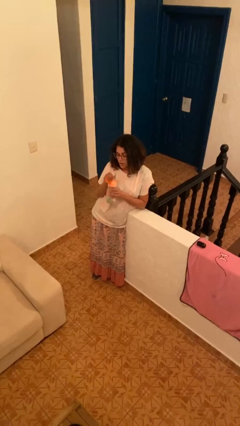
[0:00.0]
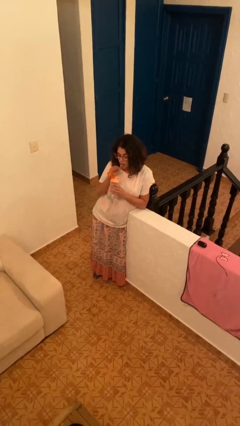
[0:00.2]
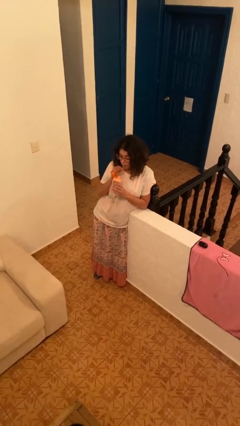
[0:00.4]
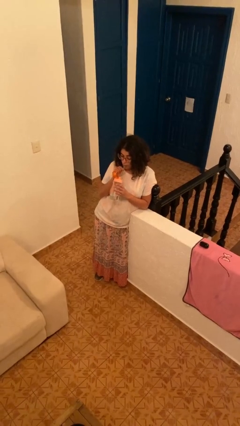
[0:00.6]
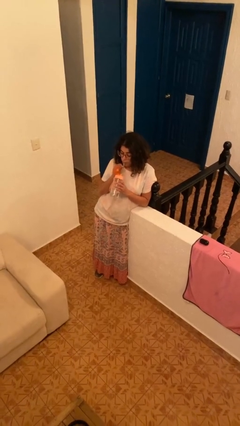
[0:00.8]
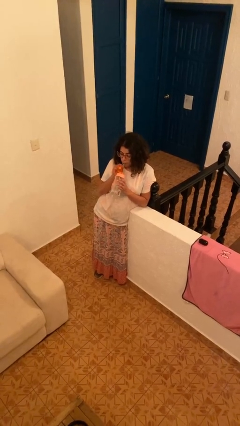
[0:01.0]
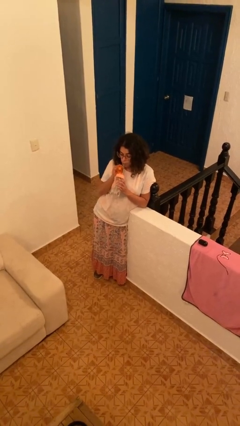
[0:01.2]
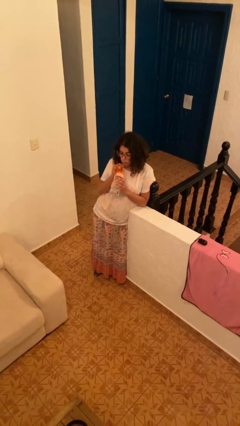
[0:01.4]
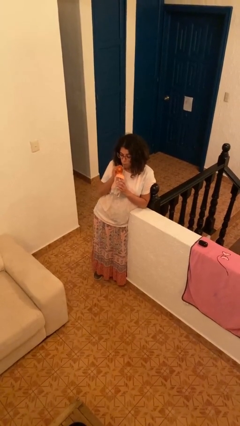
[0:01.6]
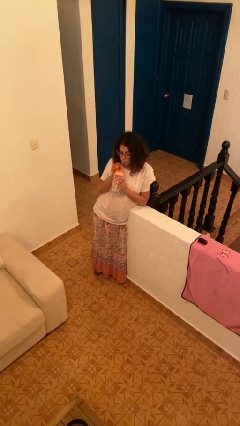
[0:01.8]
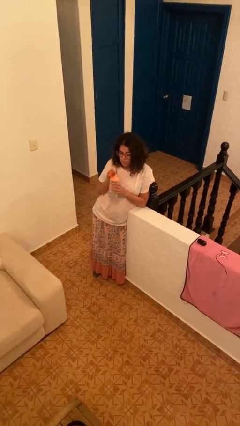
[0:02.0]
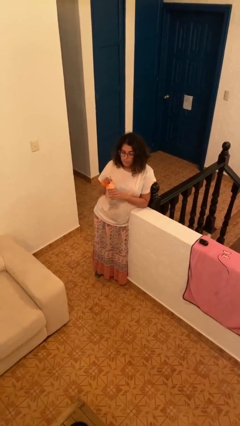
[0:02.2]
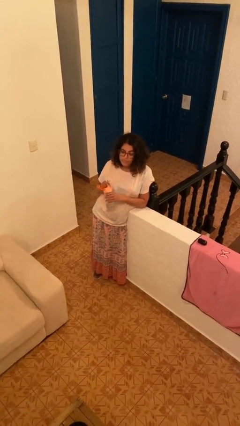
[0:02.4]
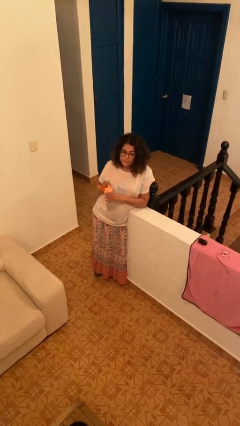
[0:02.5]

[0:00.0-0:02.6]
person drinks from straw

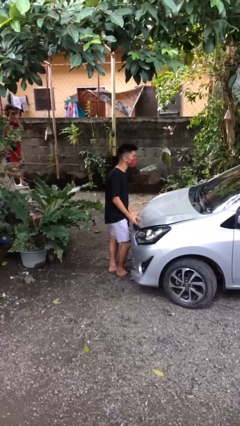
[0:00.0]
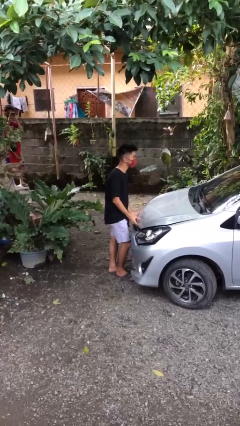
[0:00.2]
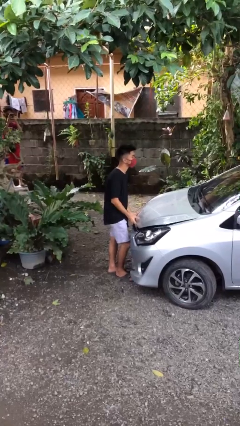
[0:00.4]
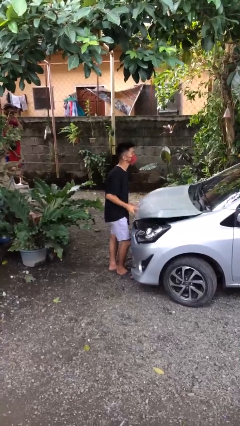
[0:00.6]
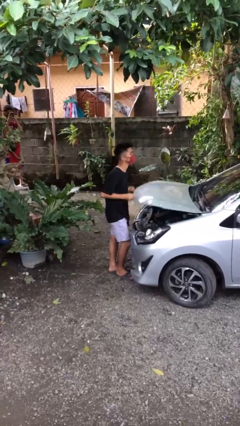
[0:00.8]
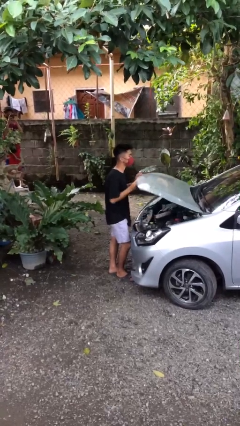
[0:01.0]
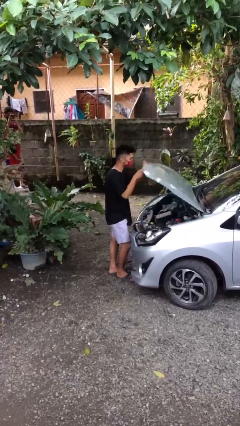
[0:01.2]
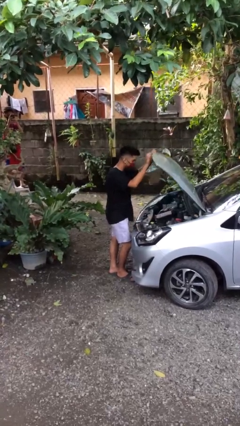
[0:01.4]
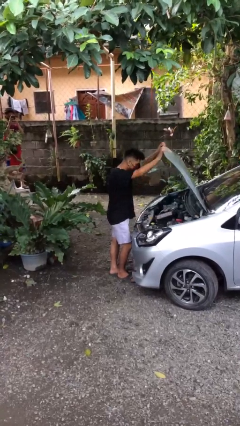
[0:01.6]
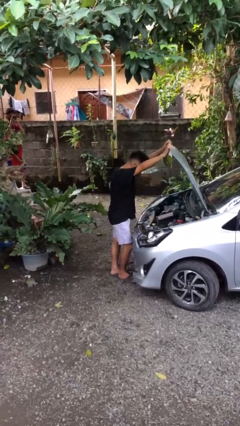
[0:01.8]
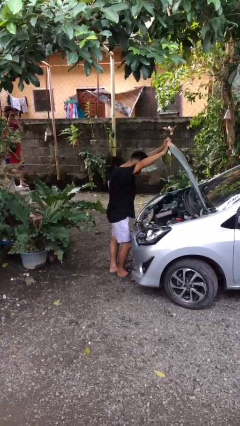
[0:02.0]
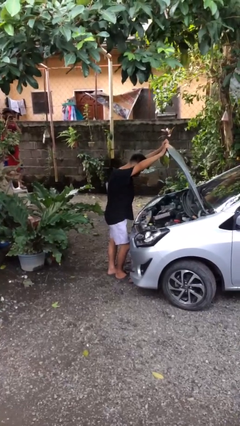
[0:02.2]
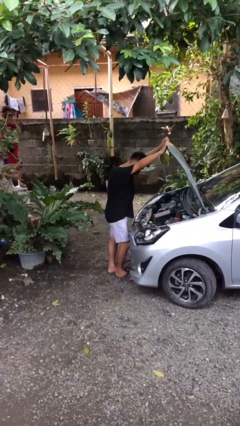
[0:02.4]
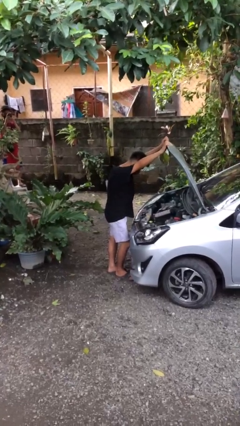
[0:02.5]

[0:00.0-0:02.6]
person opens car hood

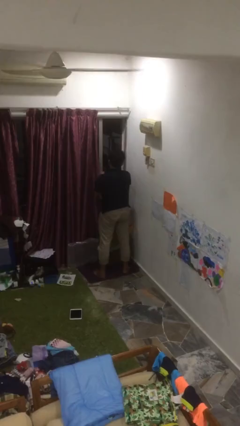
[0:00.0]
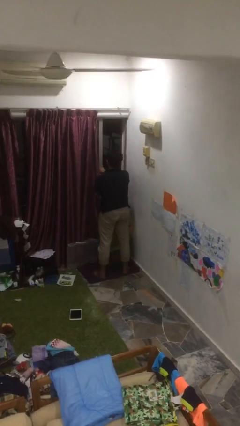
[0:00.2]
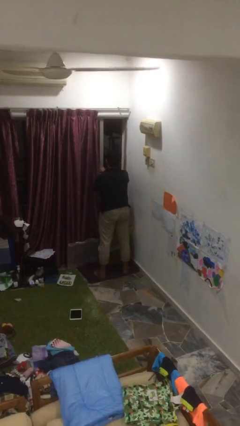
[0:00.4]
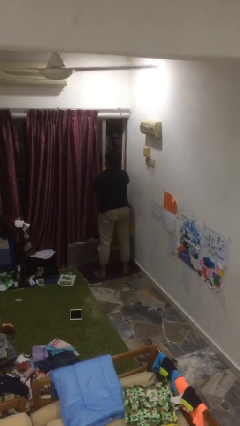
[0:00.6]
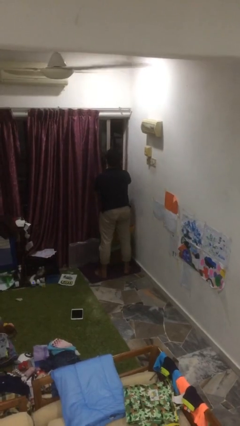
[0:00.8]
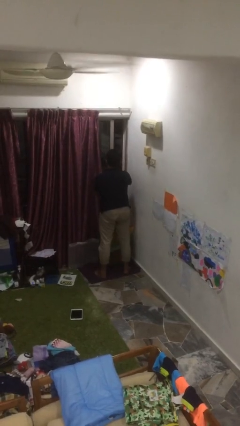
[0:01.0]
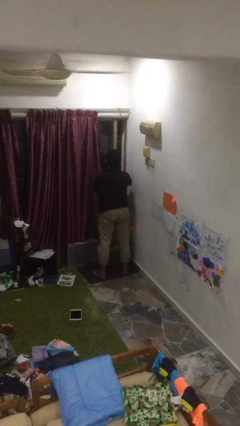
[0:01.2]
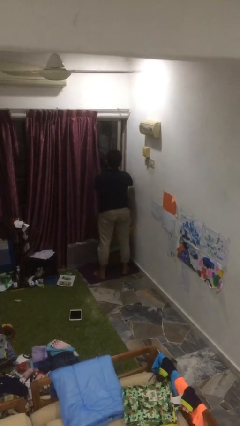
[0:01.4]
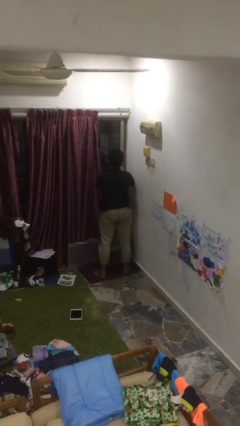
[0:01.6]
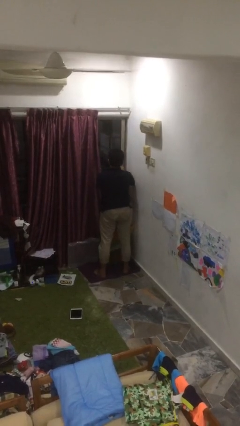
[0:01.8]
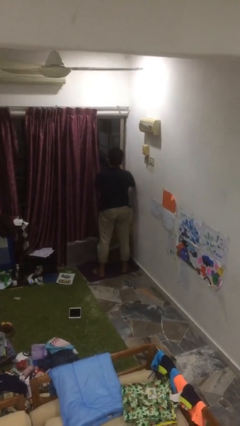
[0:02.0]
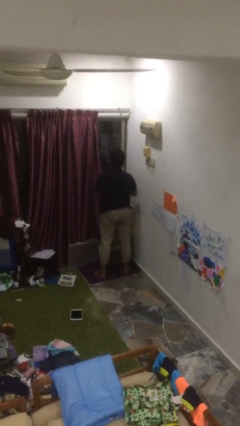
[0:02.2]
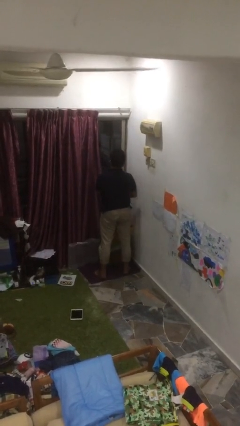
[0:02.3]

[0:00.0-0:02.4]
person closes home window

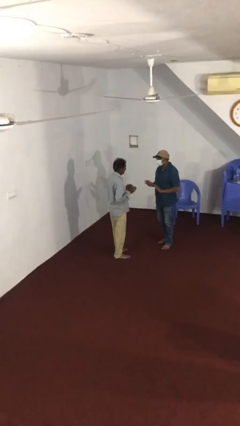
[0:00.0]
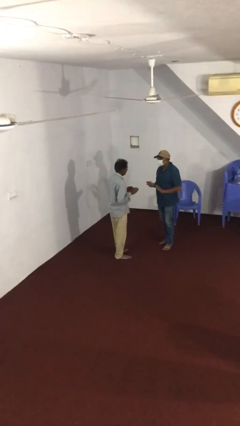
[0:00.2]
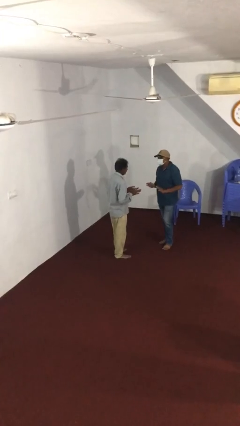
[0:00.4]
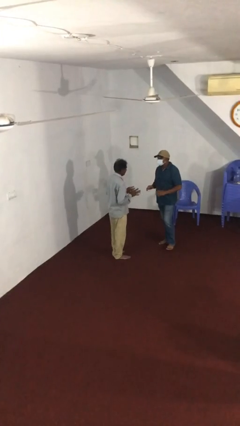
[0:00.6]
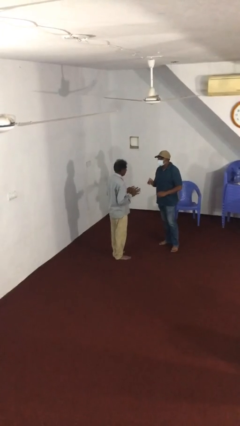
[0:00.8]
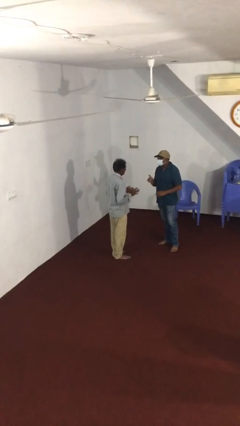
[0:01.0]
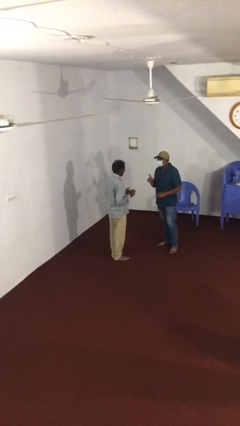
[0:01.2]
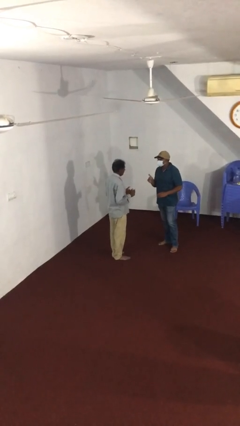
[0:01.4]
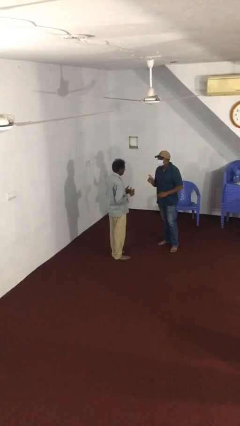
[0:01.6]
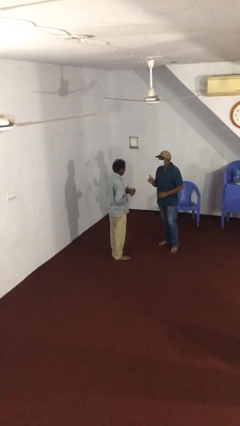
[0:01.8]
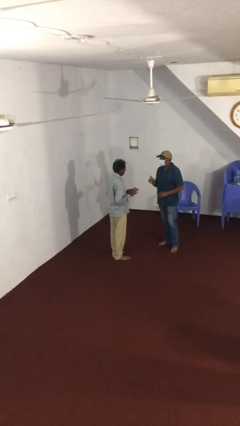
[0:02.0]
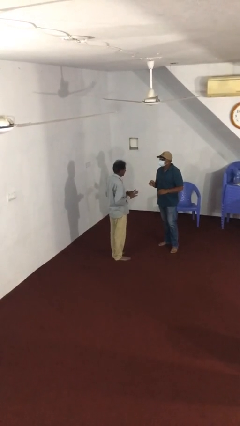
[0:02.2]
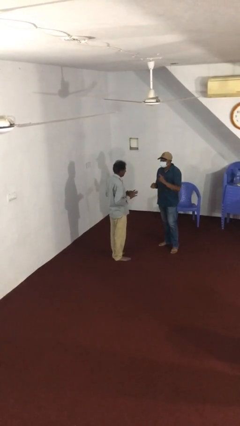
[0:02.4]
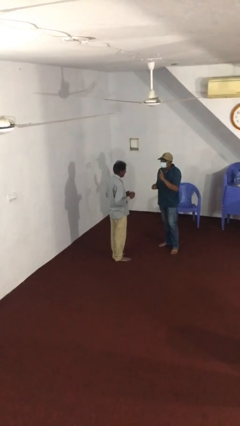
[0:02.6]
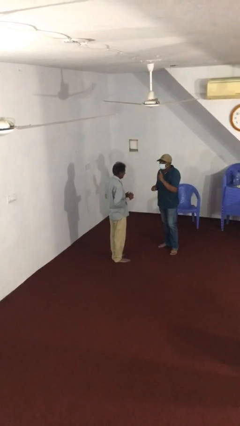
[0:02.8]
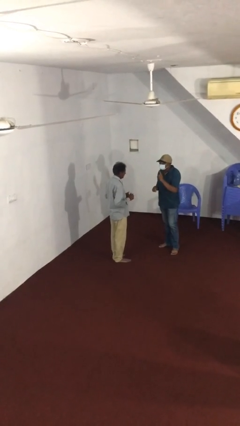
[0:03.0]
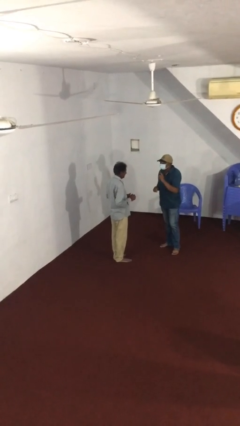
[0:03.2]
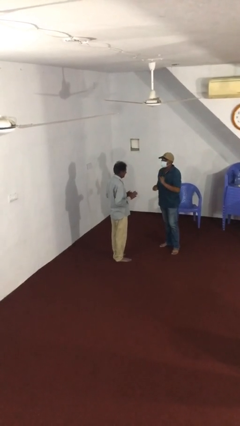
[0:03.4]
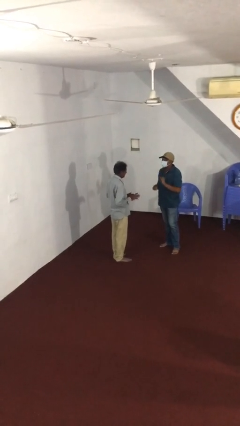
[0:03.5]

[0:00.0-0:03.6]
person talks to person

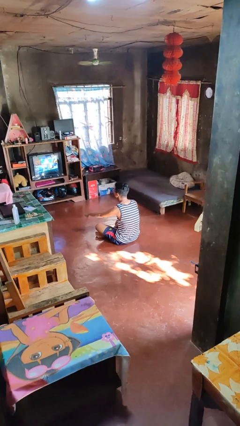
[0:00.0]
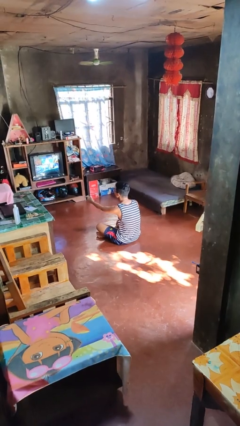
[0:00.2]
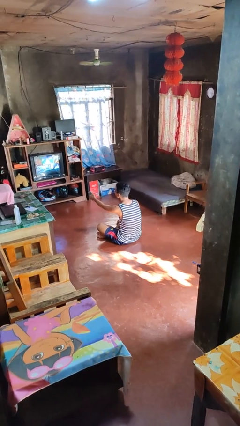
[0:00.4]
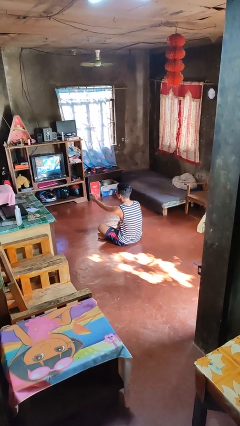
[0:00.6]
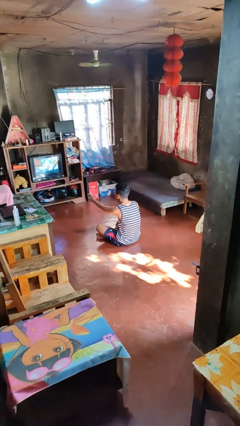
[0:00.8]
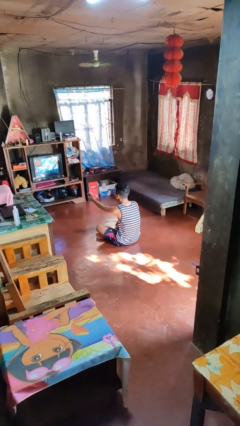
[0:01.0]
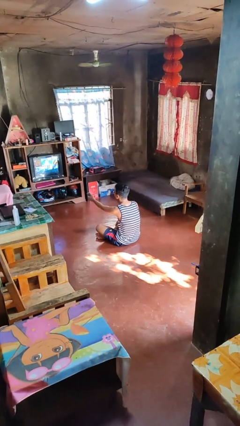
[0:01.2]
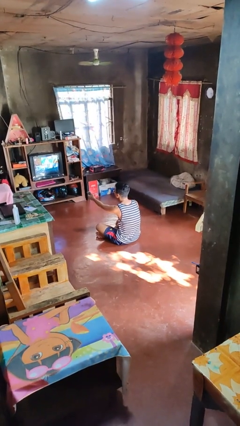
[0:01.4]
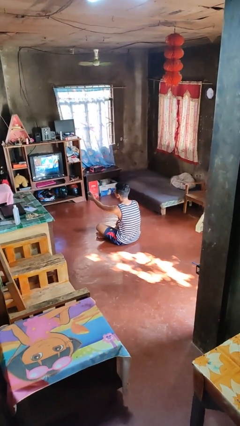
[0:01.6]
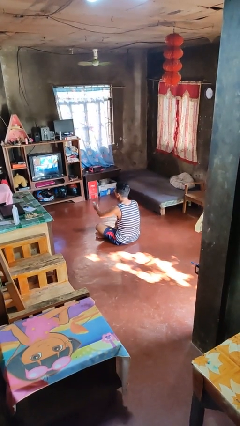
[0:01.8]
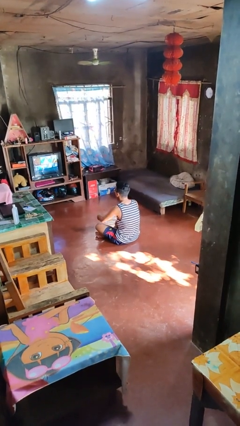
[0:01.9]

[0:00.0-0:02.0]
person uses television remote

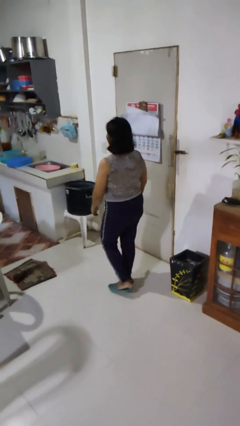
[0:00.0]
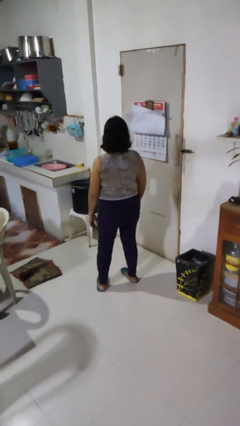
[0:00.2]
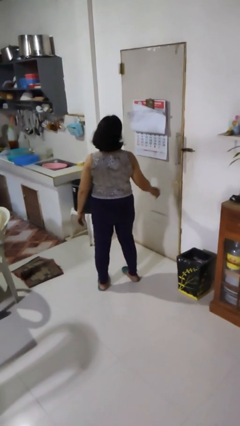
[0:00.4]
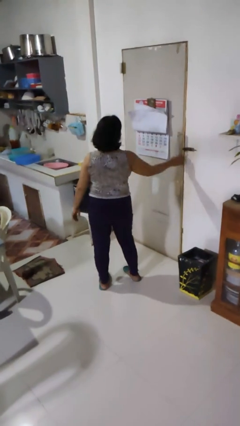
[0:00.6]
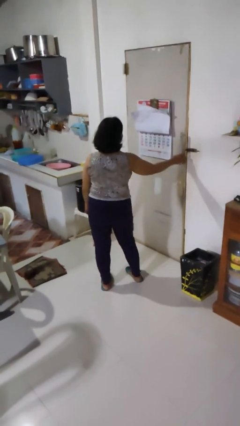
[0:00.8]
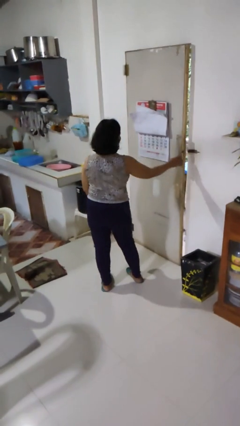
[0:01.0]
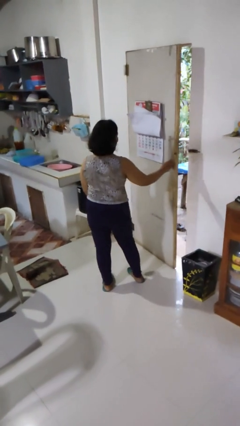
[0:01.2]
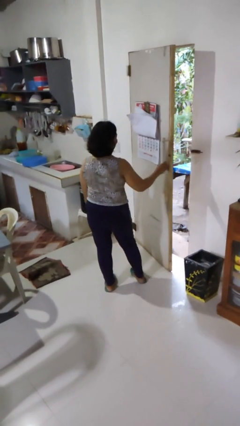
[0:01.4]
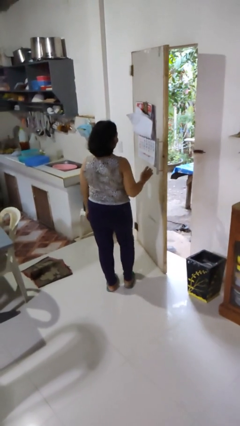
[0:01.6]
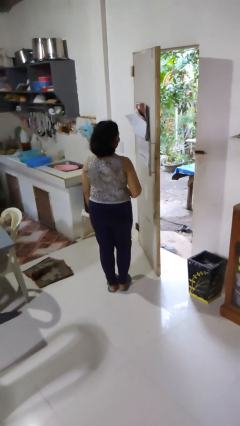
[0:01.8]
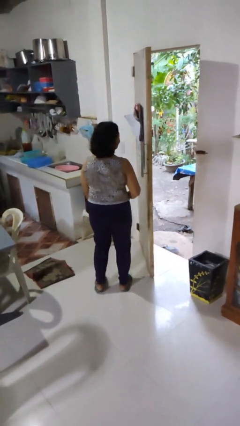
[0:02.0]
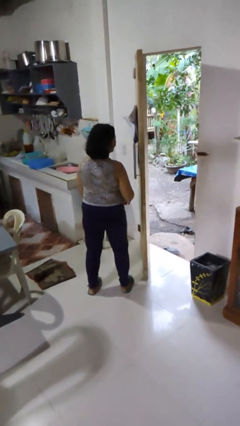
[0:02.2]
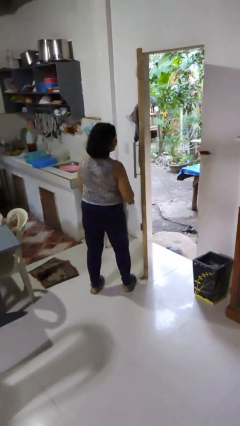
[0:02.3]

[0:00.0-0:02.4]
person opens facility door

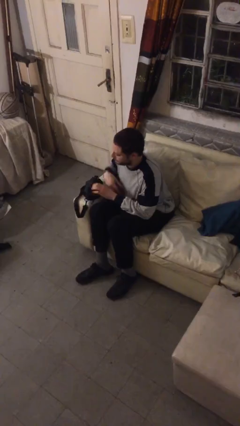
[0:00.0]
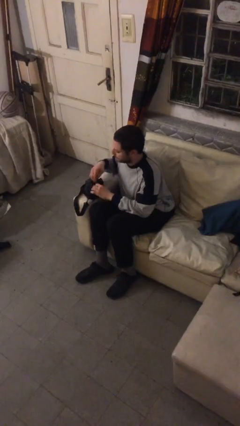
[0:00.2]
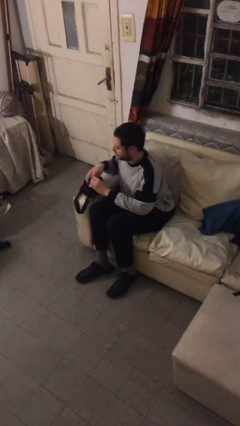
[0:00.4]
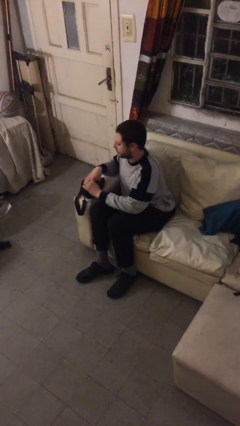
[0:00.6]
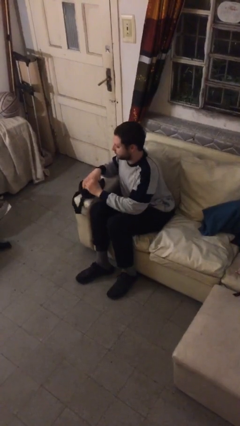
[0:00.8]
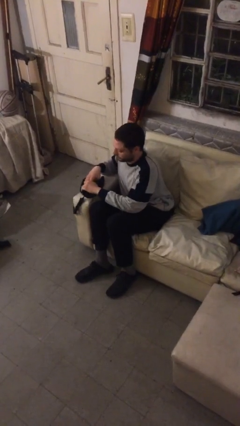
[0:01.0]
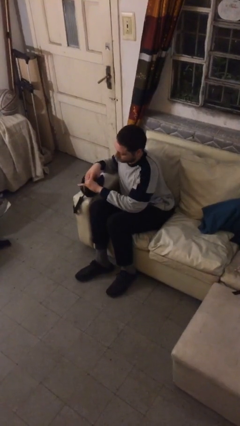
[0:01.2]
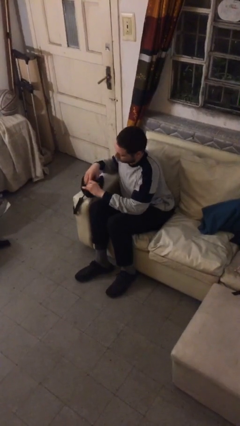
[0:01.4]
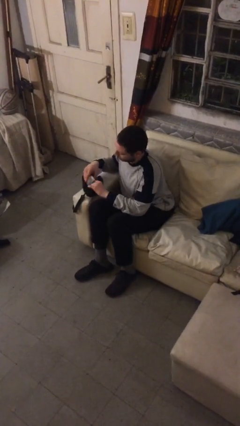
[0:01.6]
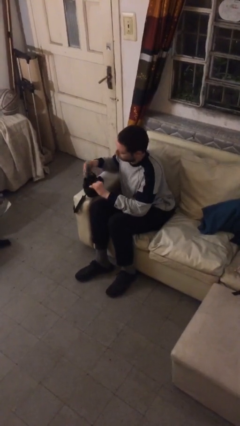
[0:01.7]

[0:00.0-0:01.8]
person searches in purse
